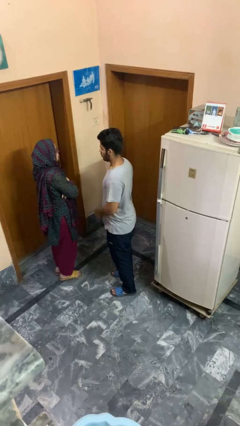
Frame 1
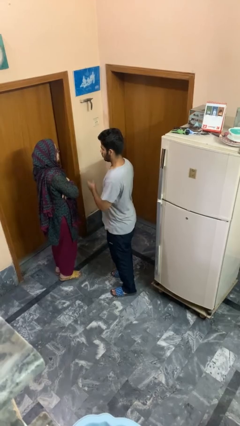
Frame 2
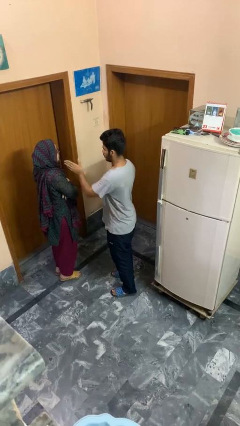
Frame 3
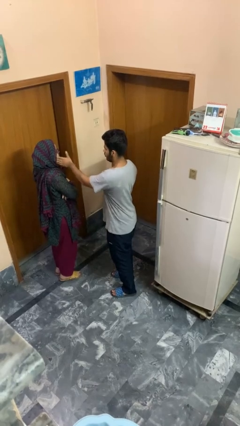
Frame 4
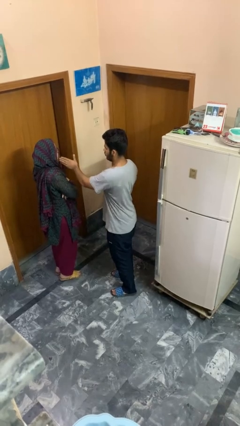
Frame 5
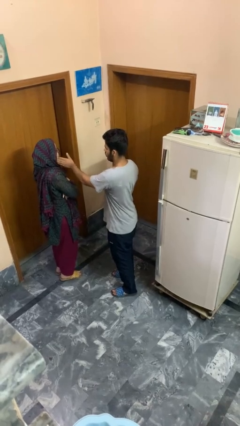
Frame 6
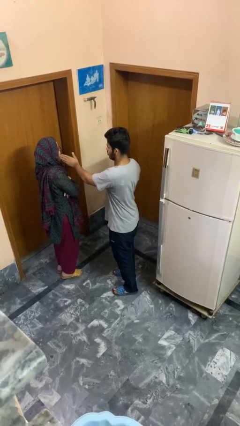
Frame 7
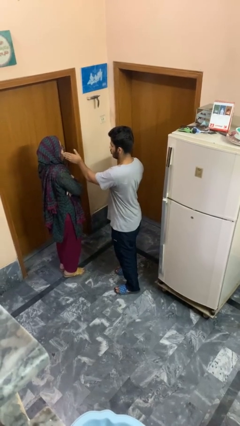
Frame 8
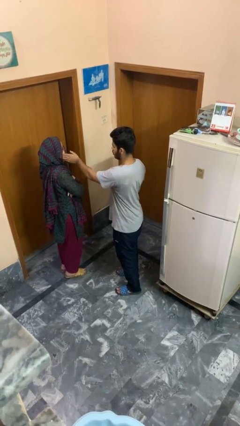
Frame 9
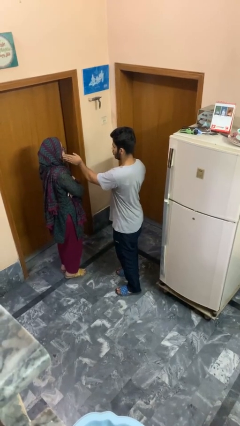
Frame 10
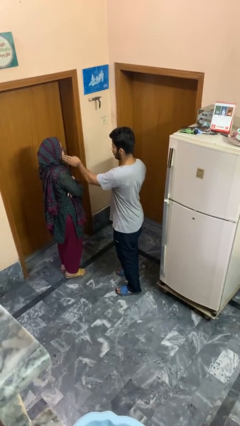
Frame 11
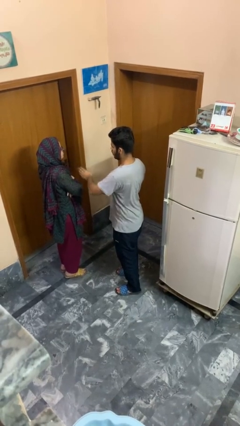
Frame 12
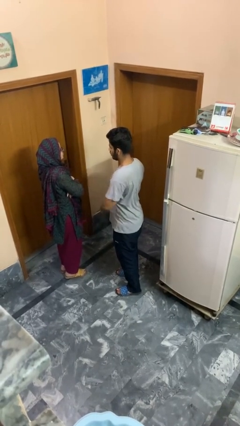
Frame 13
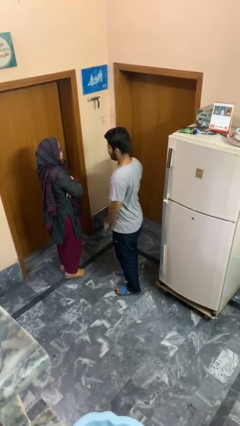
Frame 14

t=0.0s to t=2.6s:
person touches face of person

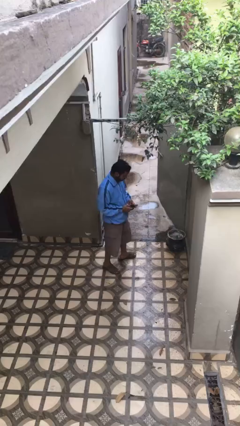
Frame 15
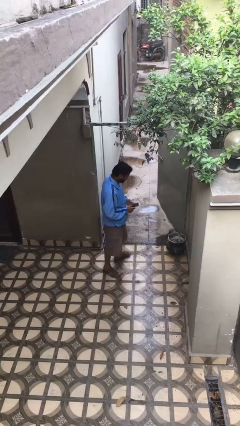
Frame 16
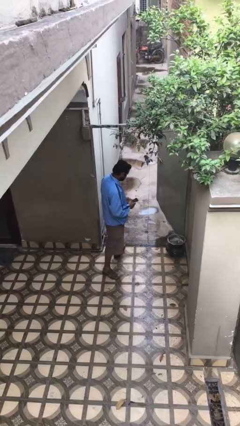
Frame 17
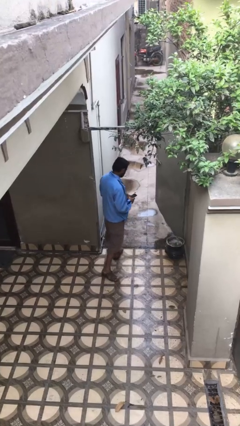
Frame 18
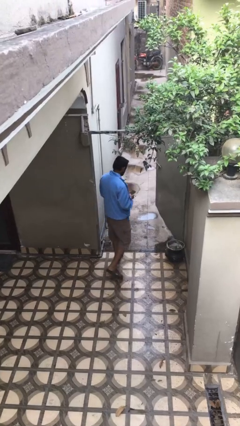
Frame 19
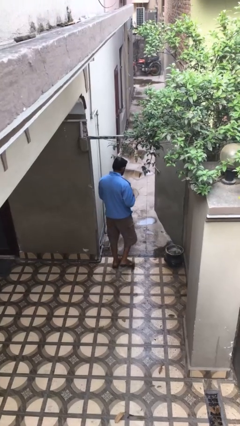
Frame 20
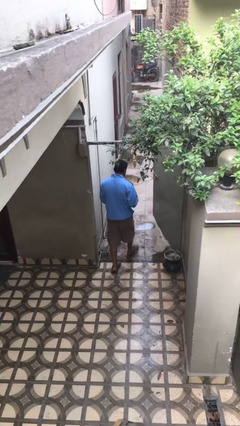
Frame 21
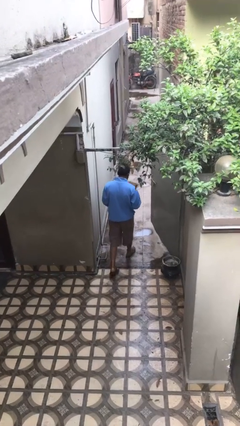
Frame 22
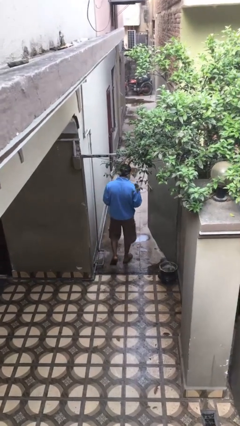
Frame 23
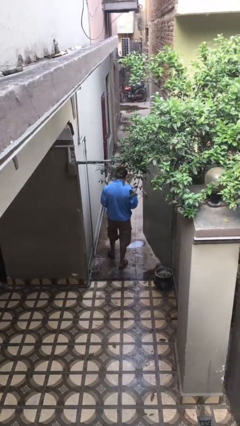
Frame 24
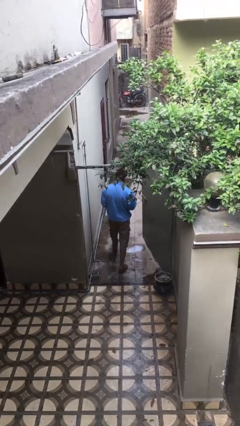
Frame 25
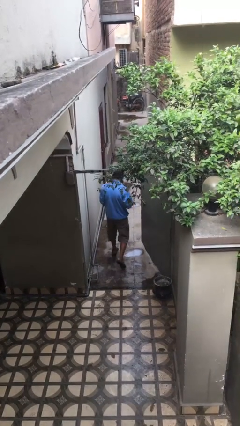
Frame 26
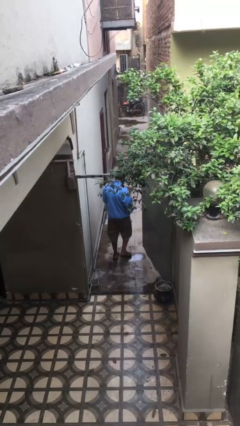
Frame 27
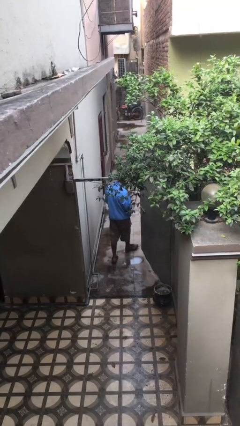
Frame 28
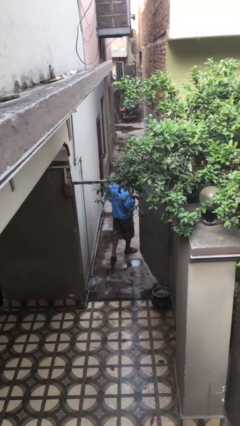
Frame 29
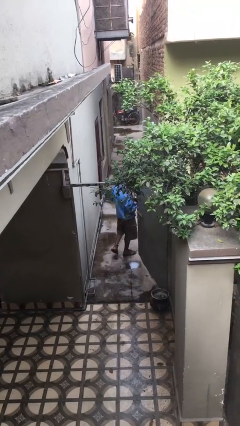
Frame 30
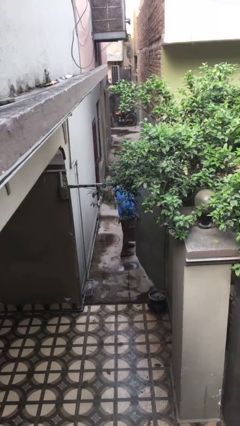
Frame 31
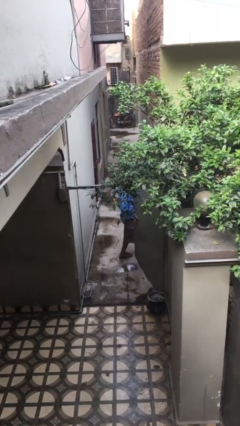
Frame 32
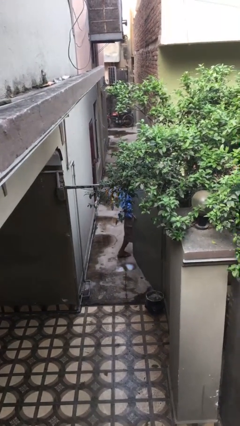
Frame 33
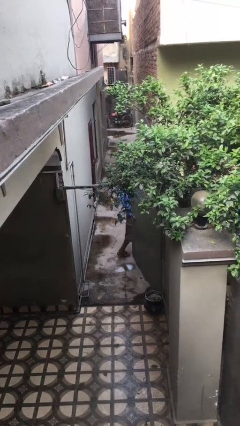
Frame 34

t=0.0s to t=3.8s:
person exits scene through structure

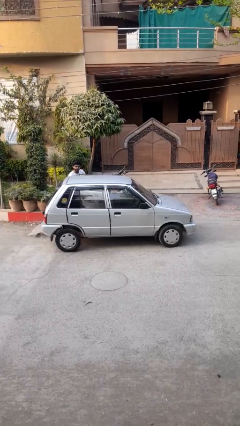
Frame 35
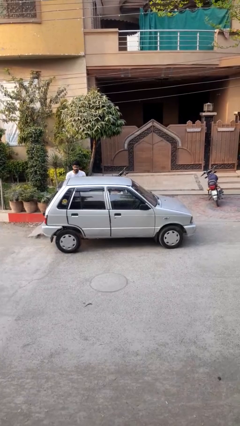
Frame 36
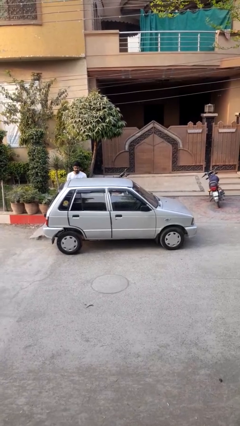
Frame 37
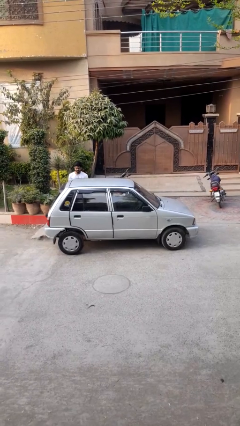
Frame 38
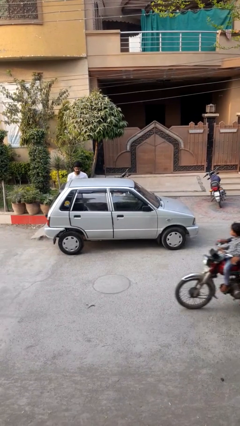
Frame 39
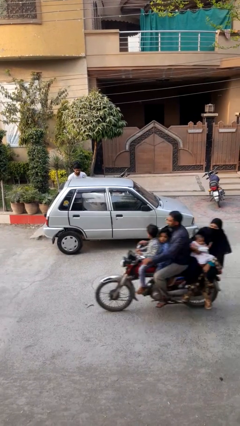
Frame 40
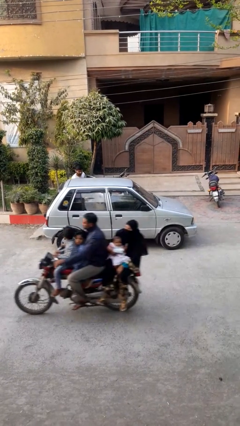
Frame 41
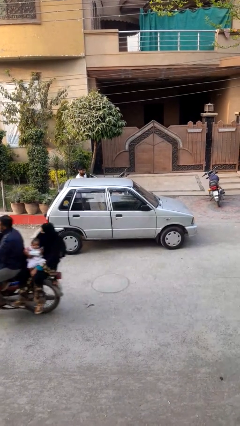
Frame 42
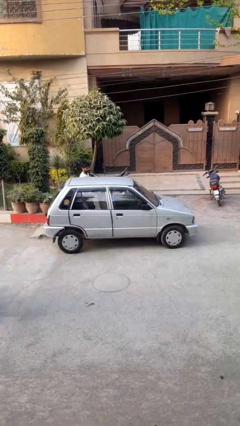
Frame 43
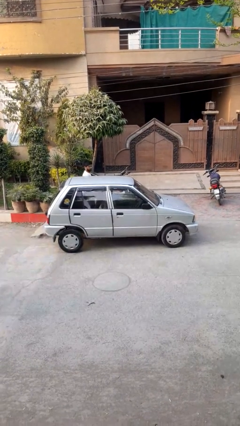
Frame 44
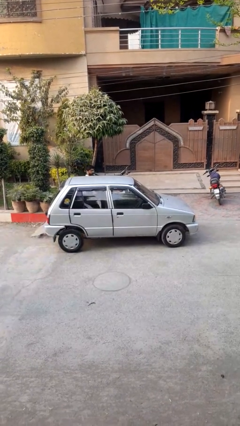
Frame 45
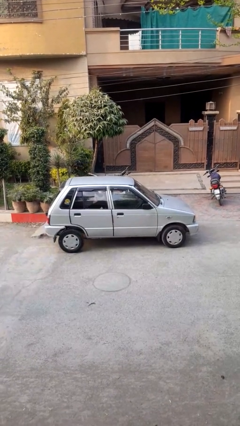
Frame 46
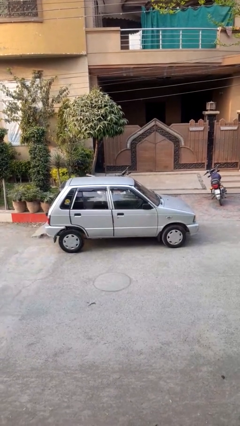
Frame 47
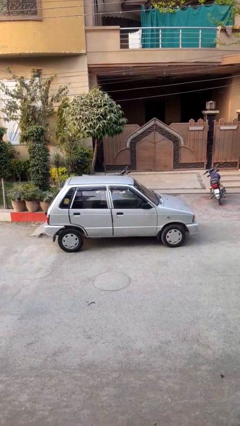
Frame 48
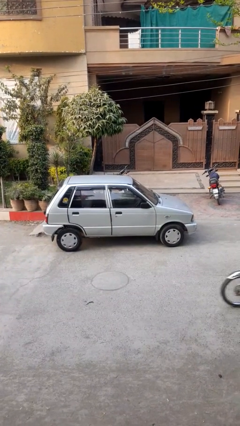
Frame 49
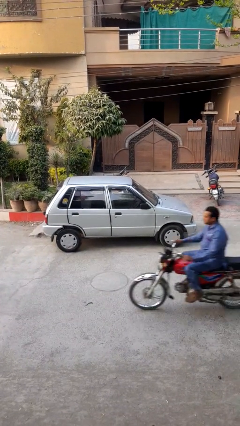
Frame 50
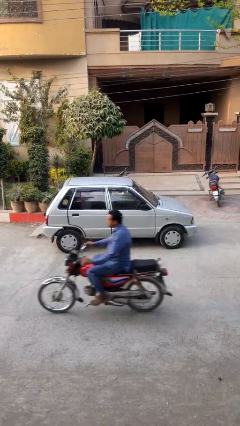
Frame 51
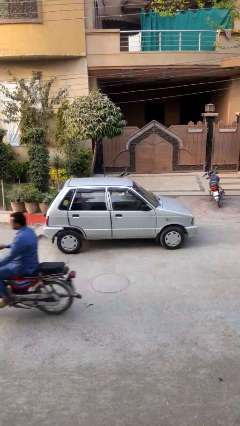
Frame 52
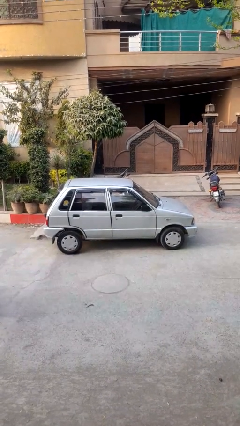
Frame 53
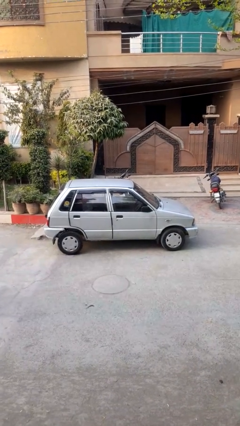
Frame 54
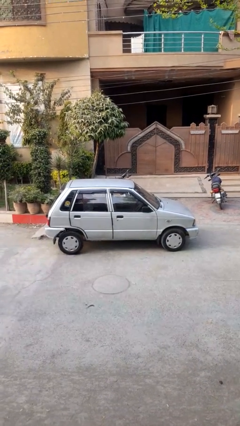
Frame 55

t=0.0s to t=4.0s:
car picks up person

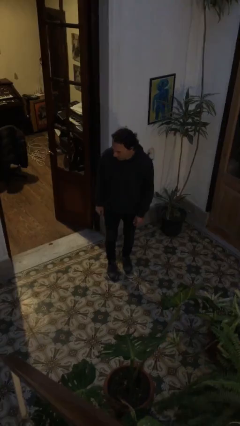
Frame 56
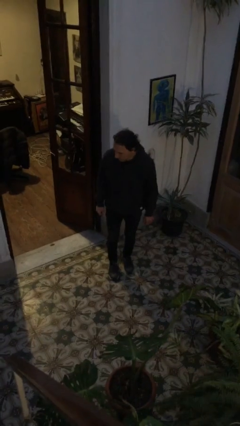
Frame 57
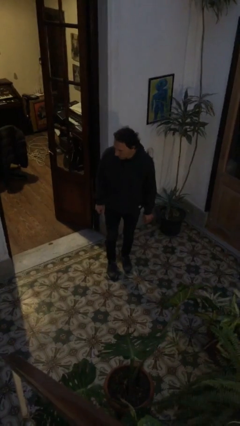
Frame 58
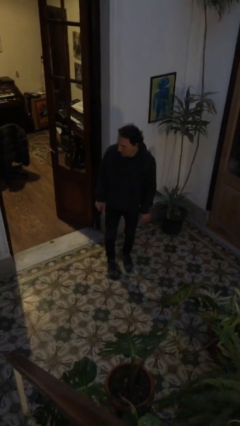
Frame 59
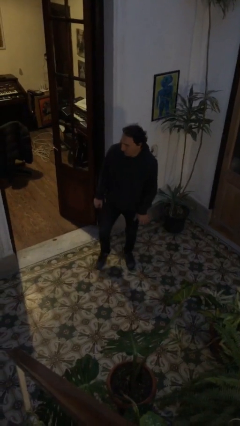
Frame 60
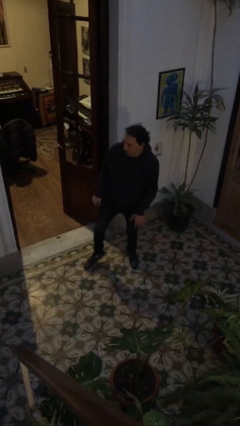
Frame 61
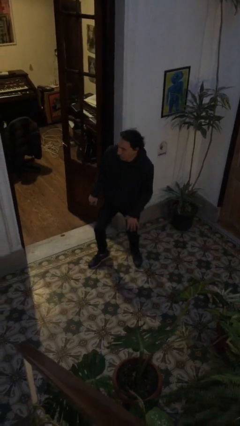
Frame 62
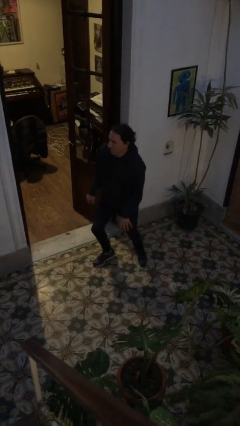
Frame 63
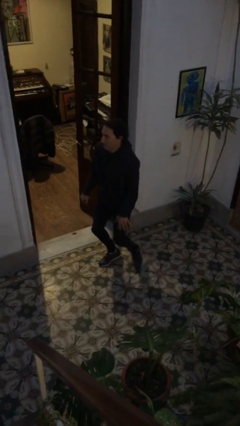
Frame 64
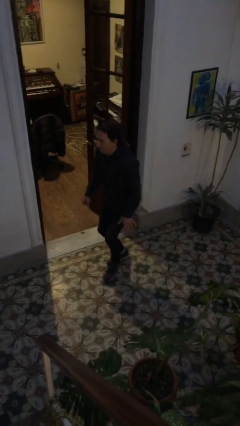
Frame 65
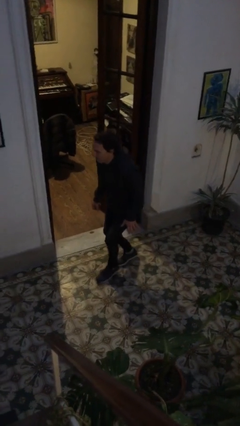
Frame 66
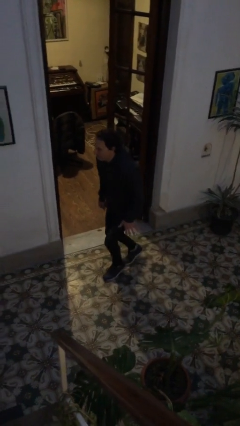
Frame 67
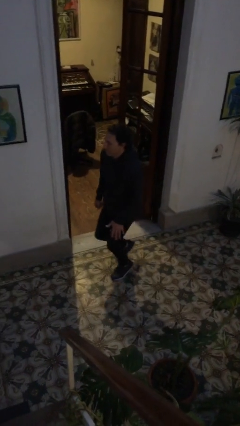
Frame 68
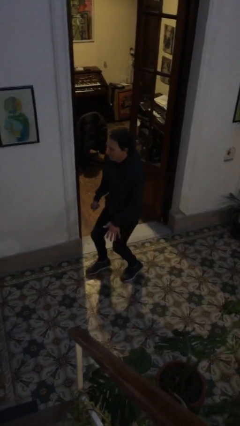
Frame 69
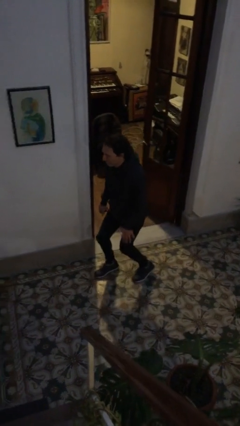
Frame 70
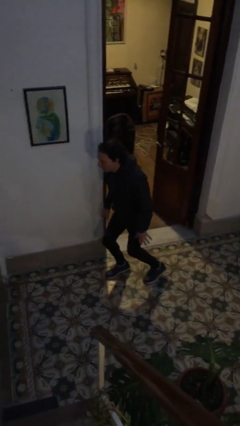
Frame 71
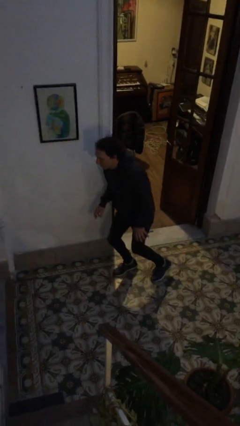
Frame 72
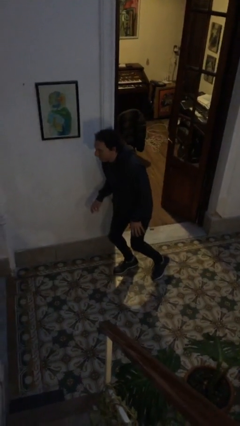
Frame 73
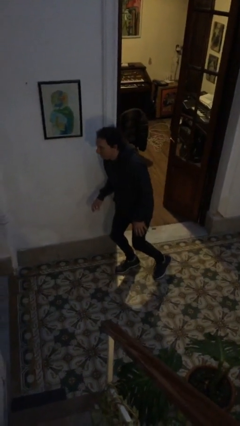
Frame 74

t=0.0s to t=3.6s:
person walks tiptoe

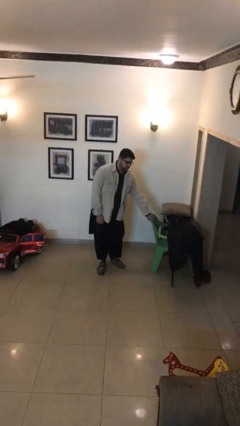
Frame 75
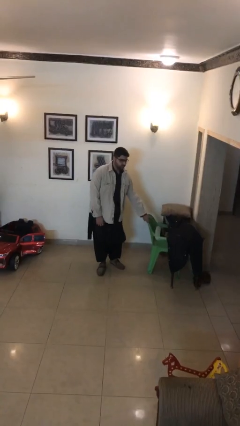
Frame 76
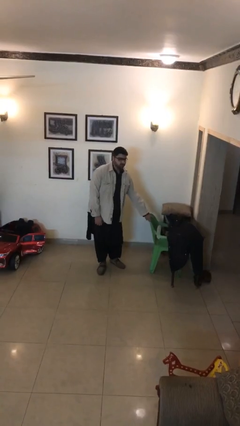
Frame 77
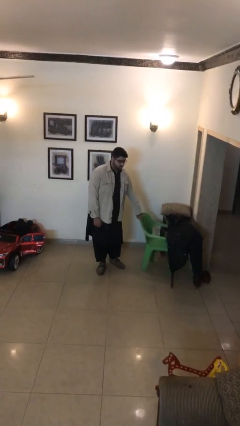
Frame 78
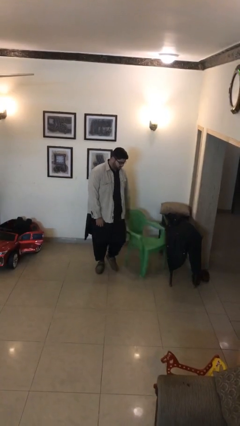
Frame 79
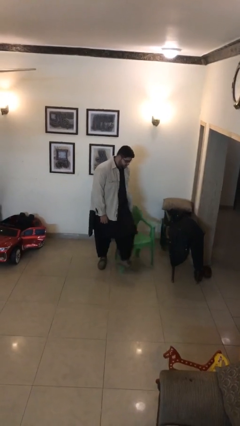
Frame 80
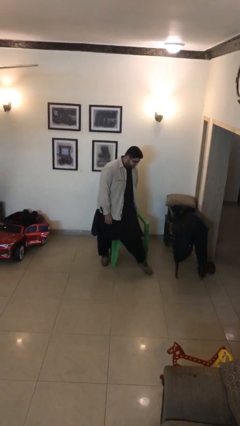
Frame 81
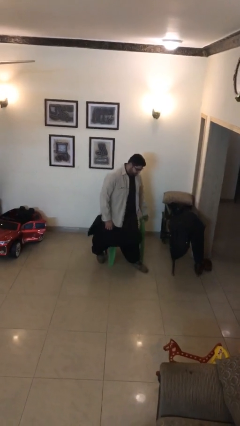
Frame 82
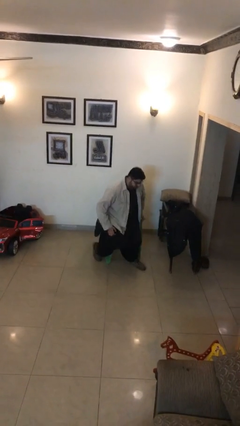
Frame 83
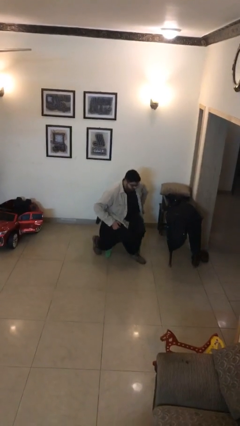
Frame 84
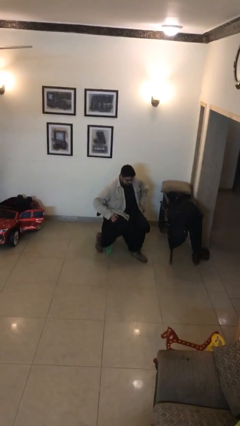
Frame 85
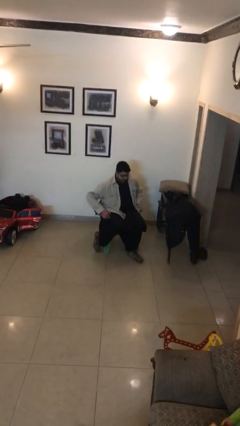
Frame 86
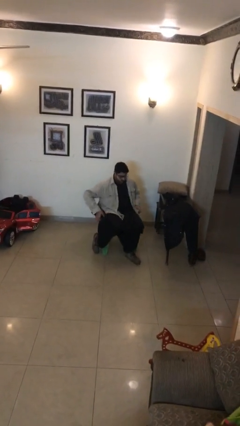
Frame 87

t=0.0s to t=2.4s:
person sits down

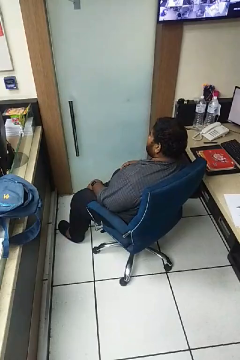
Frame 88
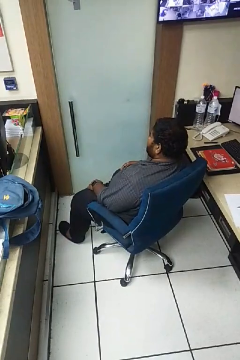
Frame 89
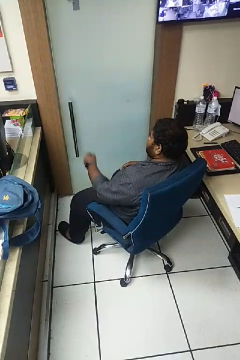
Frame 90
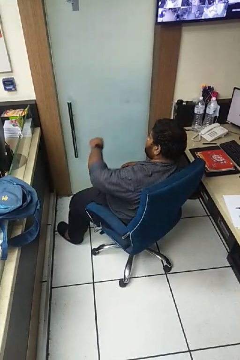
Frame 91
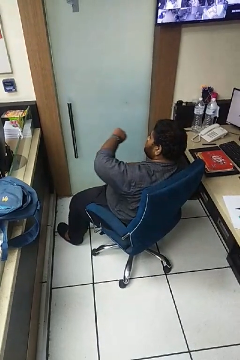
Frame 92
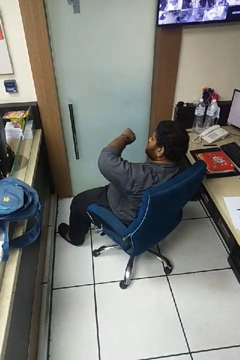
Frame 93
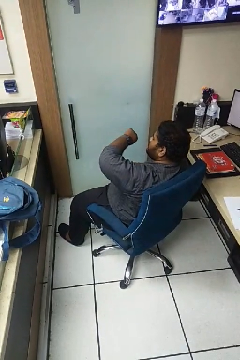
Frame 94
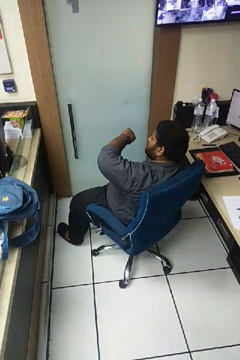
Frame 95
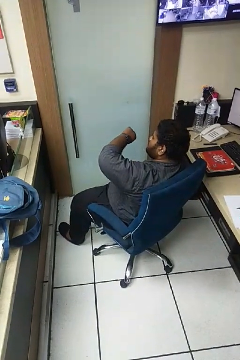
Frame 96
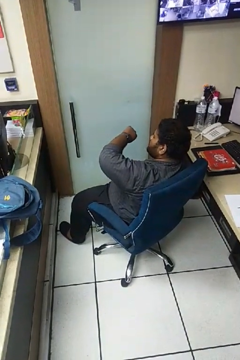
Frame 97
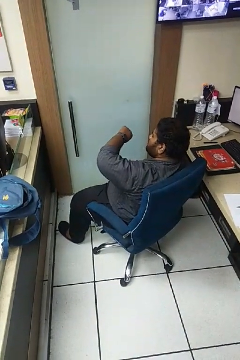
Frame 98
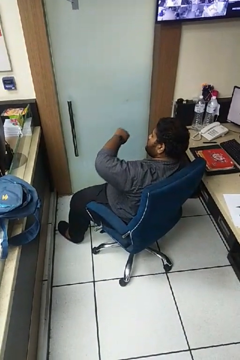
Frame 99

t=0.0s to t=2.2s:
person looks at wristwatch
